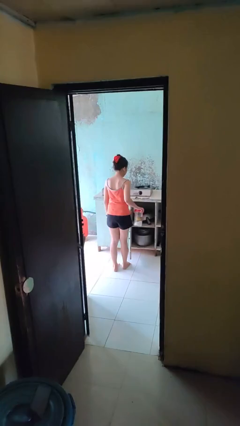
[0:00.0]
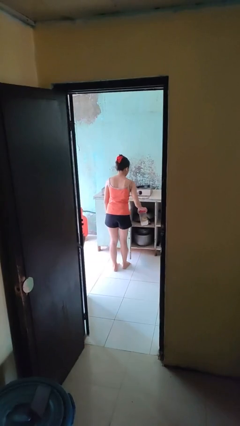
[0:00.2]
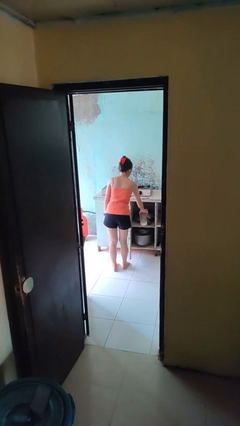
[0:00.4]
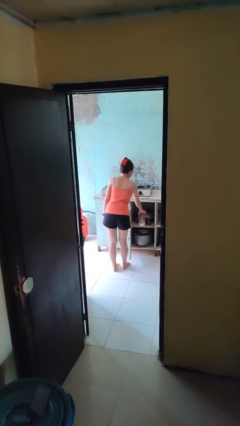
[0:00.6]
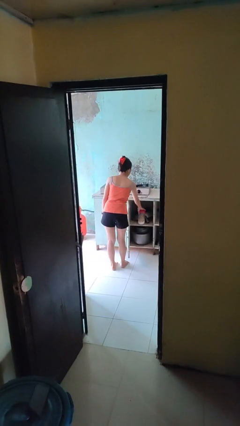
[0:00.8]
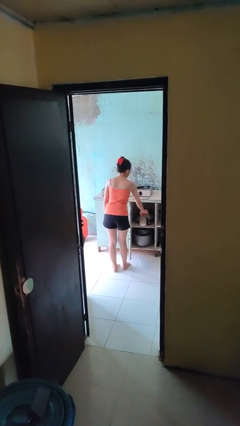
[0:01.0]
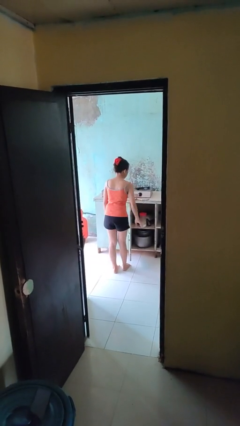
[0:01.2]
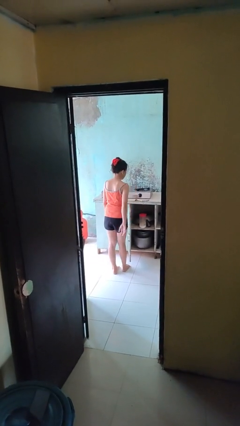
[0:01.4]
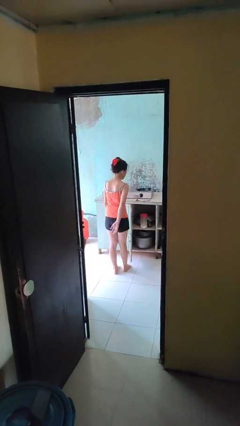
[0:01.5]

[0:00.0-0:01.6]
person puts down object into cabinet

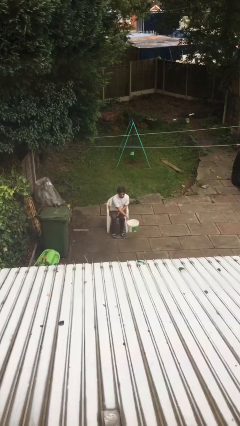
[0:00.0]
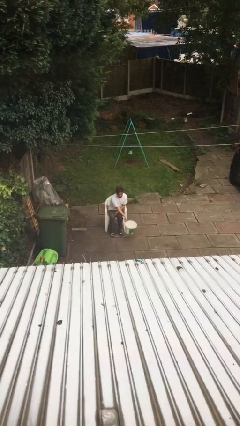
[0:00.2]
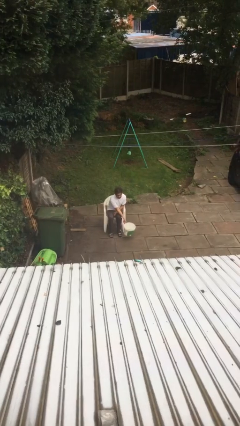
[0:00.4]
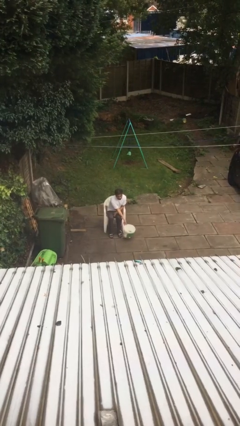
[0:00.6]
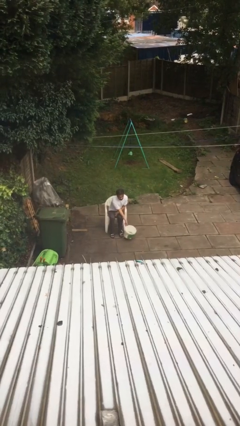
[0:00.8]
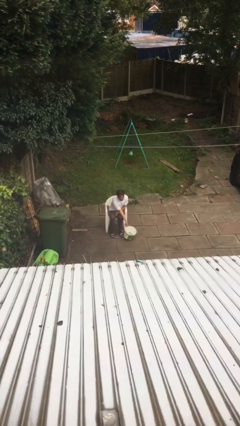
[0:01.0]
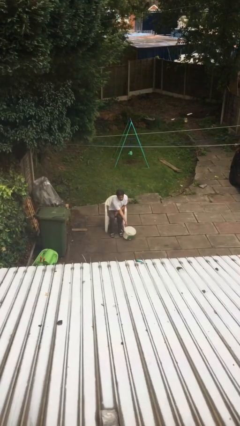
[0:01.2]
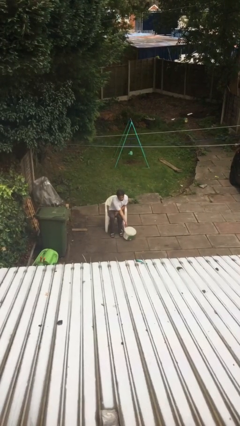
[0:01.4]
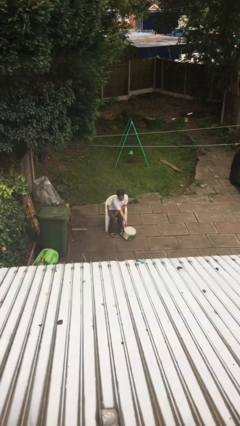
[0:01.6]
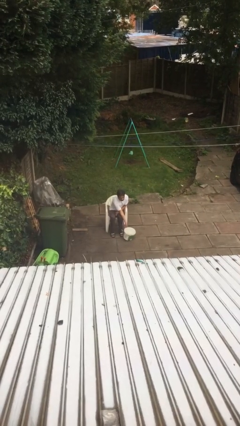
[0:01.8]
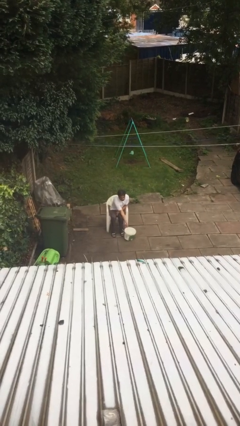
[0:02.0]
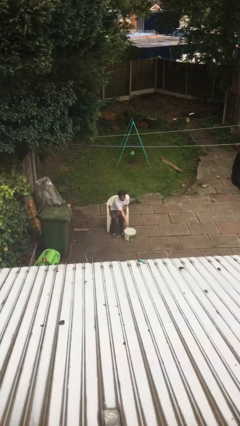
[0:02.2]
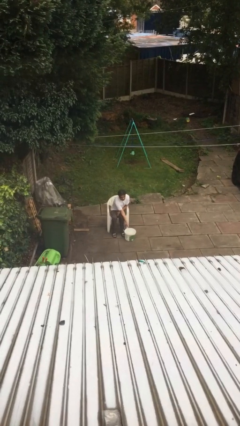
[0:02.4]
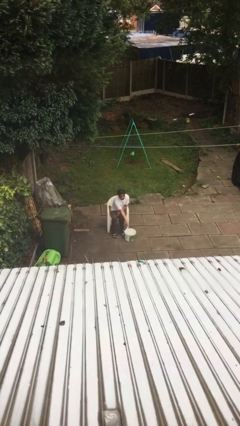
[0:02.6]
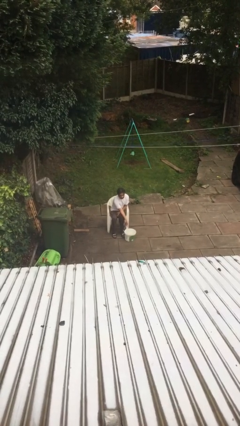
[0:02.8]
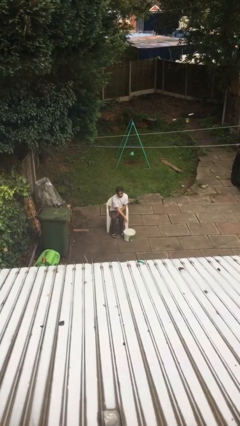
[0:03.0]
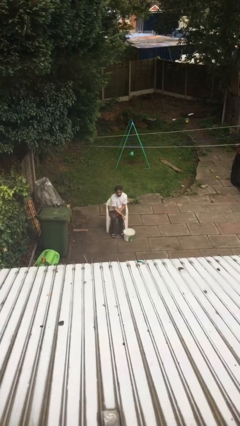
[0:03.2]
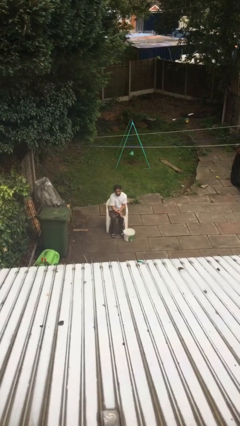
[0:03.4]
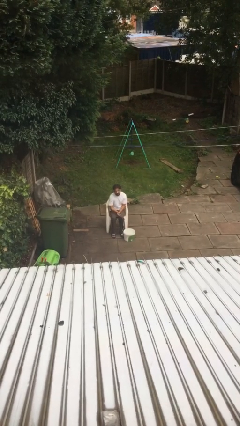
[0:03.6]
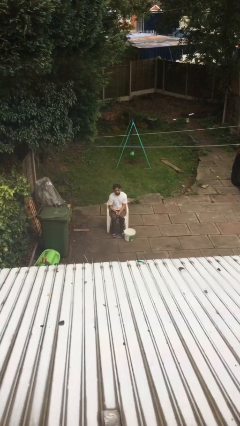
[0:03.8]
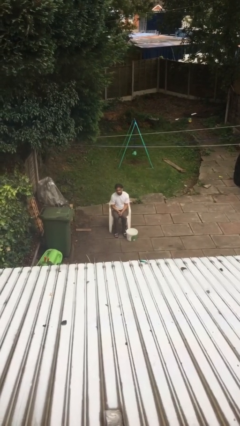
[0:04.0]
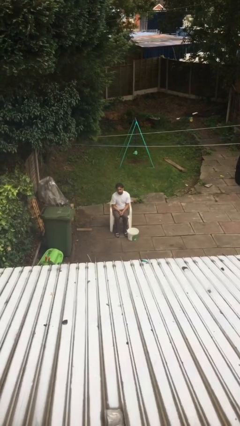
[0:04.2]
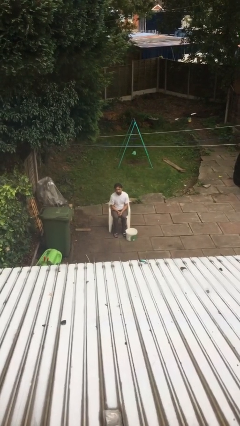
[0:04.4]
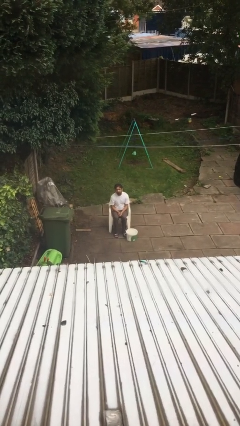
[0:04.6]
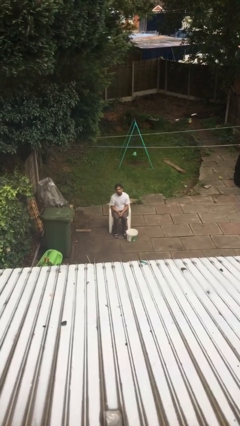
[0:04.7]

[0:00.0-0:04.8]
person puts down object on floor

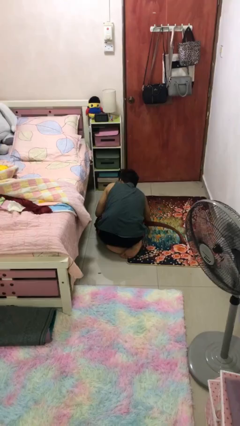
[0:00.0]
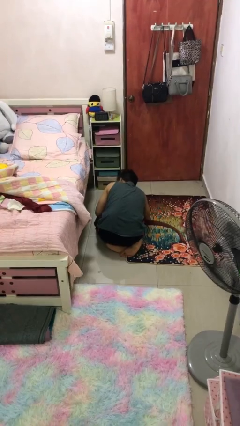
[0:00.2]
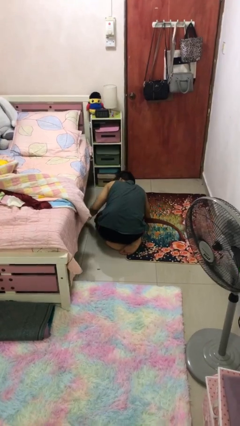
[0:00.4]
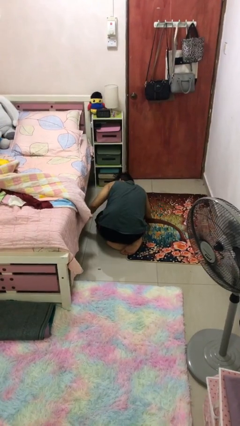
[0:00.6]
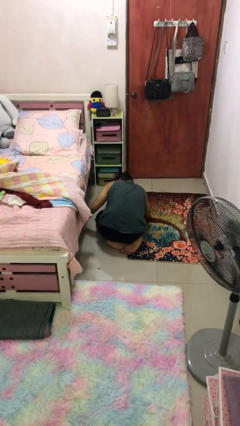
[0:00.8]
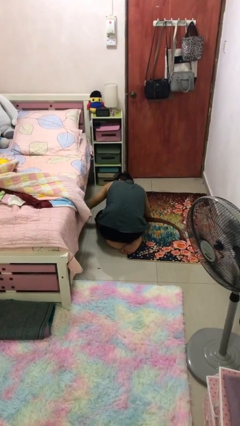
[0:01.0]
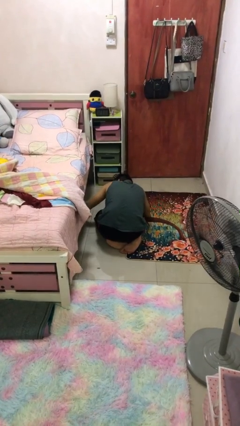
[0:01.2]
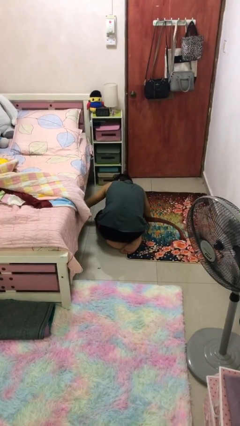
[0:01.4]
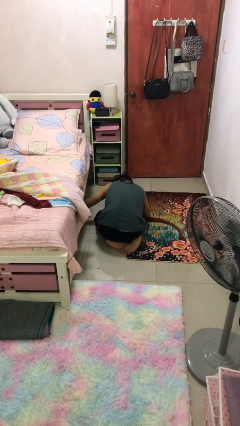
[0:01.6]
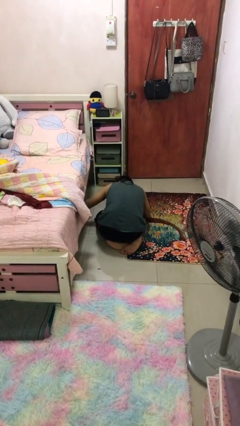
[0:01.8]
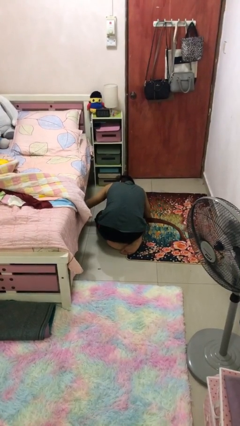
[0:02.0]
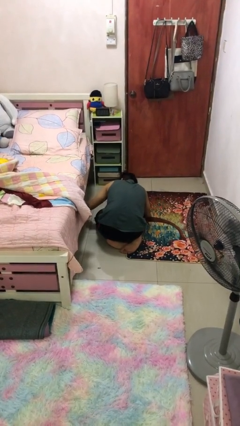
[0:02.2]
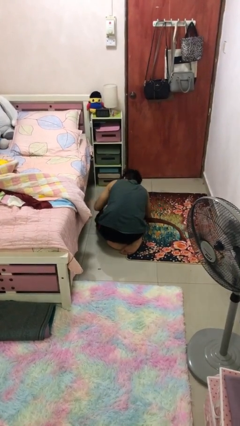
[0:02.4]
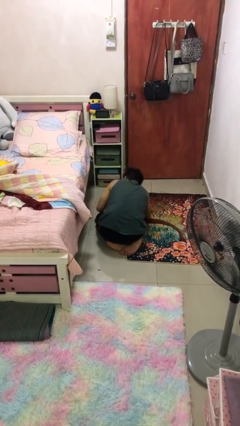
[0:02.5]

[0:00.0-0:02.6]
person searches under bed

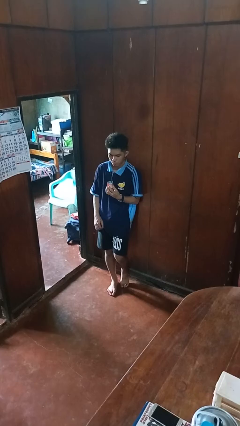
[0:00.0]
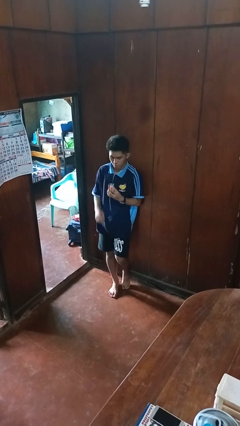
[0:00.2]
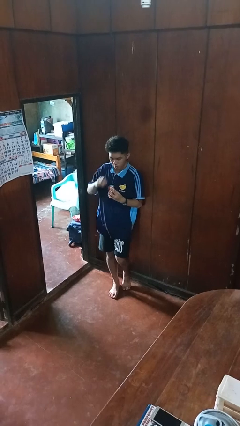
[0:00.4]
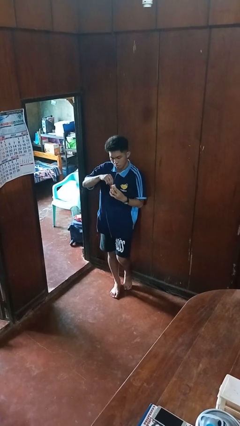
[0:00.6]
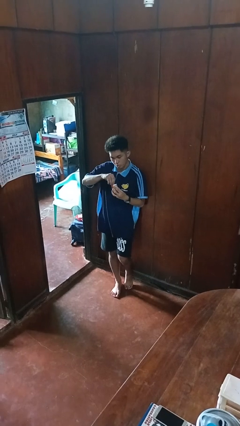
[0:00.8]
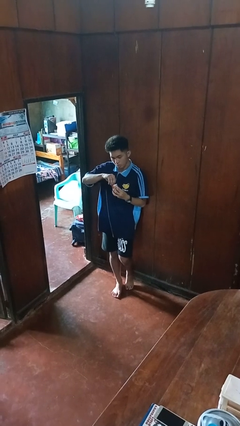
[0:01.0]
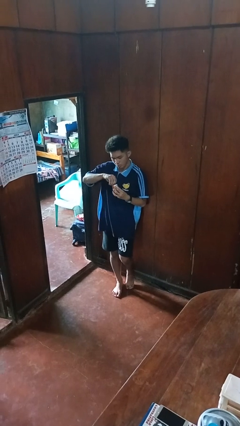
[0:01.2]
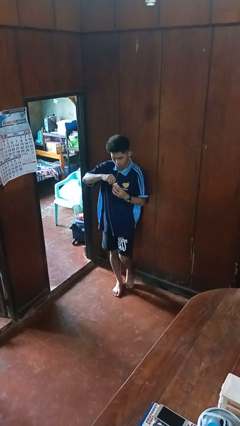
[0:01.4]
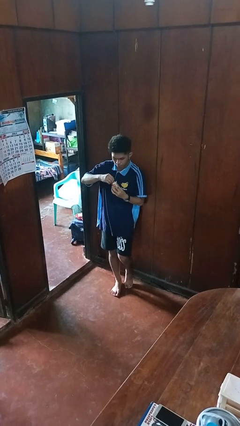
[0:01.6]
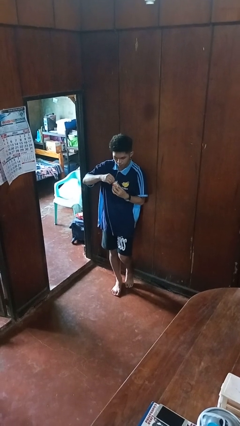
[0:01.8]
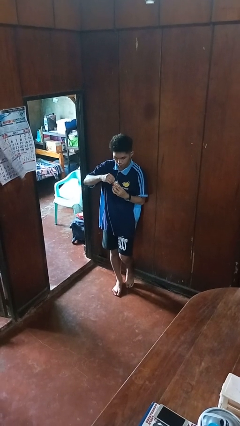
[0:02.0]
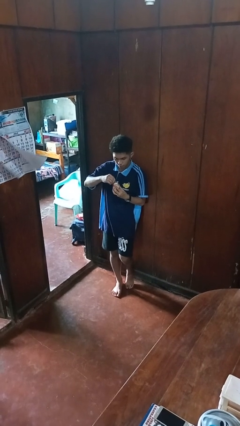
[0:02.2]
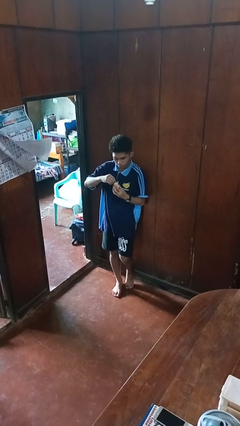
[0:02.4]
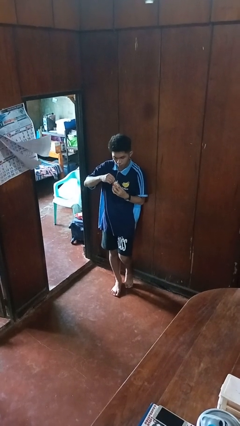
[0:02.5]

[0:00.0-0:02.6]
person opens beverage can

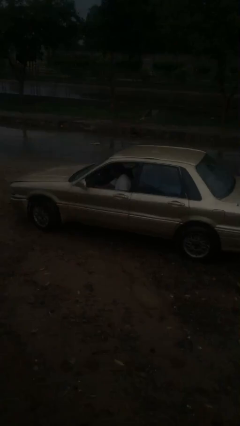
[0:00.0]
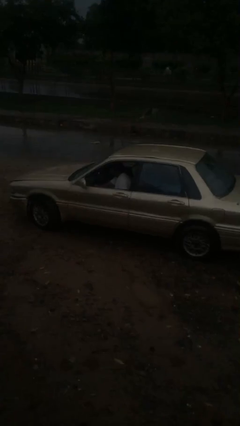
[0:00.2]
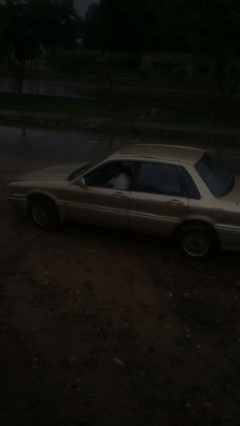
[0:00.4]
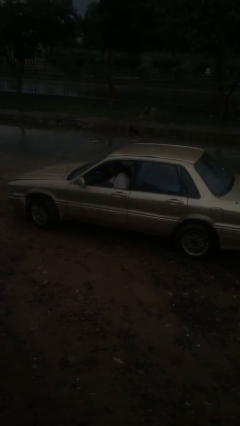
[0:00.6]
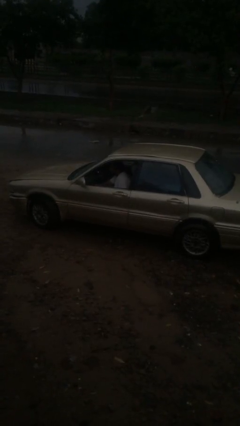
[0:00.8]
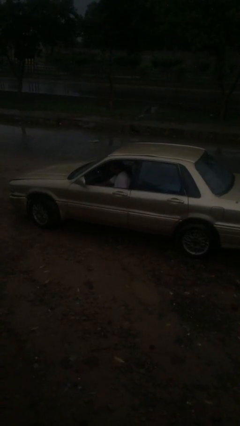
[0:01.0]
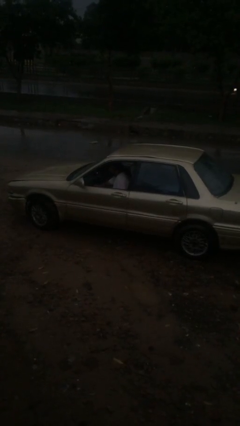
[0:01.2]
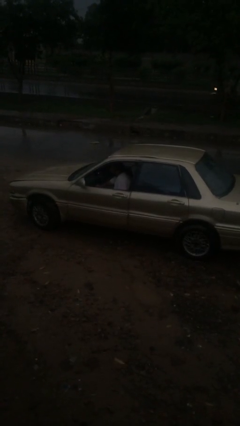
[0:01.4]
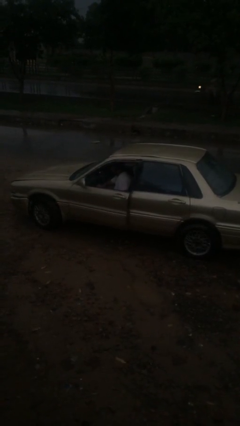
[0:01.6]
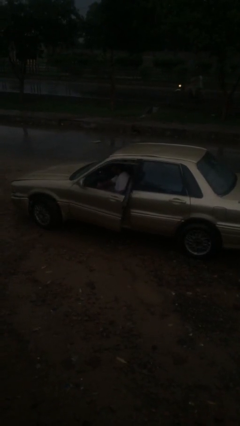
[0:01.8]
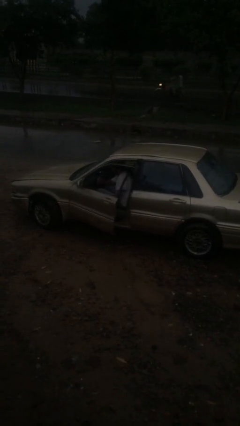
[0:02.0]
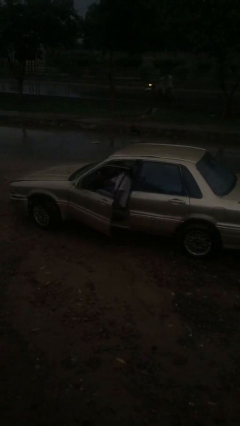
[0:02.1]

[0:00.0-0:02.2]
person opens car door

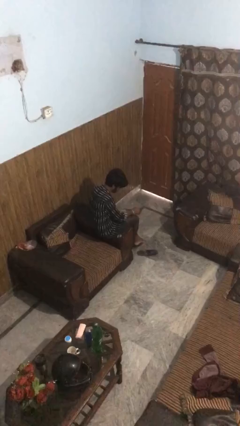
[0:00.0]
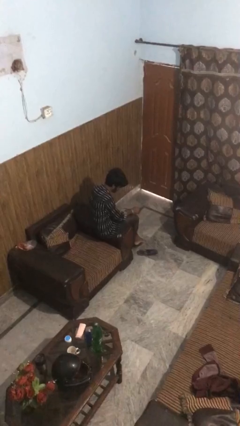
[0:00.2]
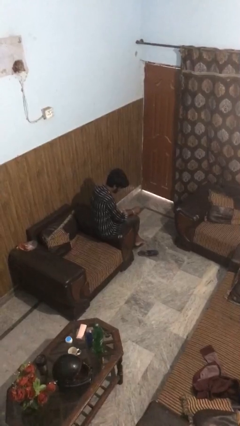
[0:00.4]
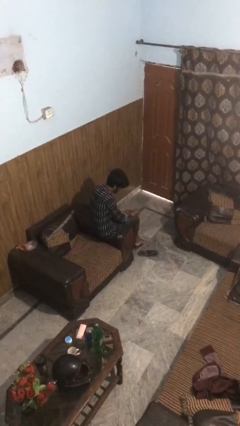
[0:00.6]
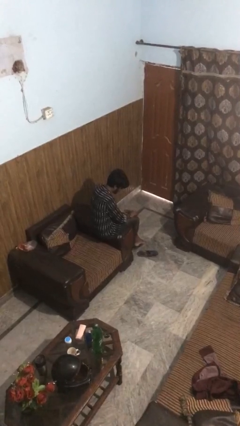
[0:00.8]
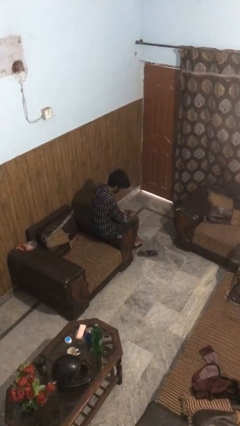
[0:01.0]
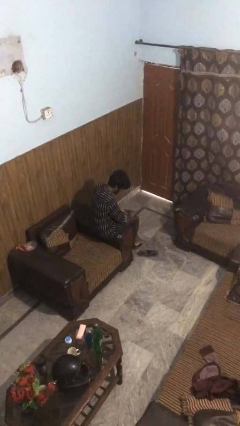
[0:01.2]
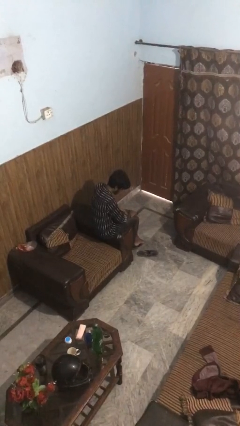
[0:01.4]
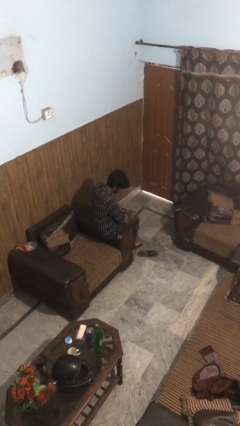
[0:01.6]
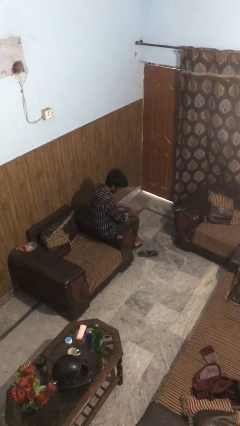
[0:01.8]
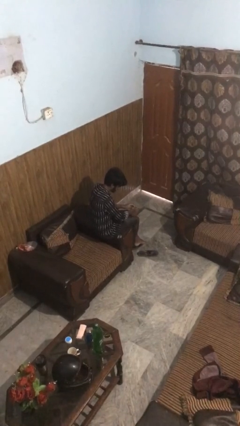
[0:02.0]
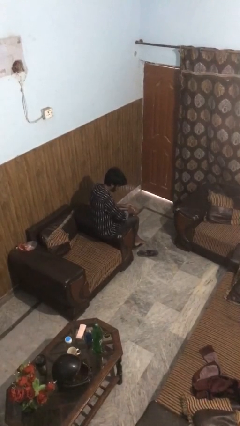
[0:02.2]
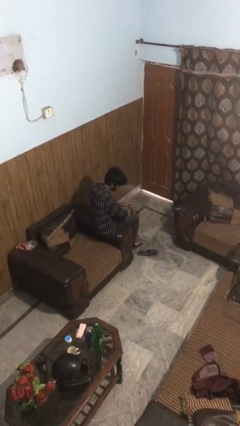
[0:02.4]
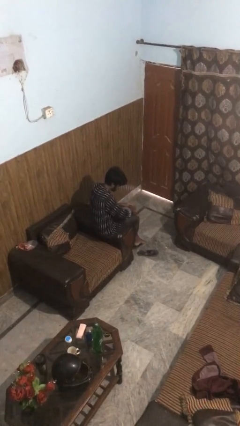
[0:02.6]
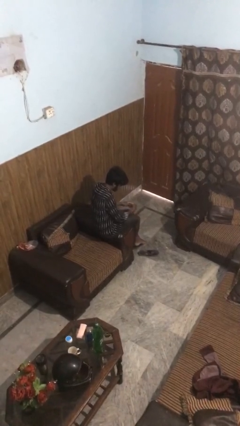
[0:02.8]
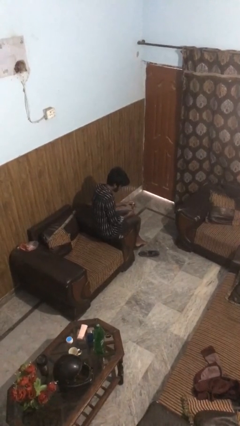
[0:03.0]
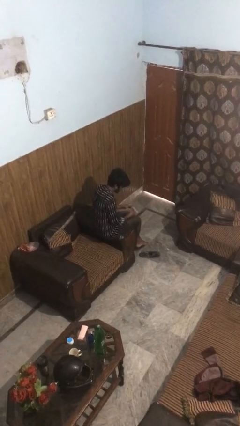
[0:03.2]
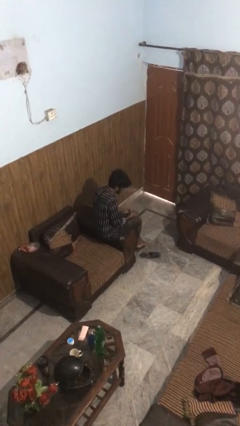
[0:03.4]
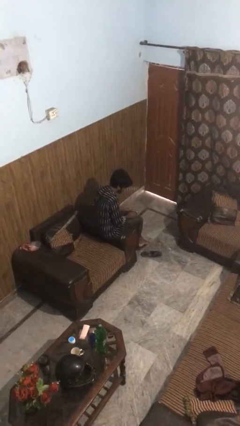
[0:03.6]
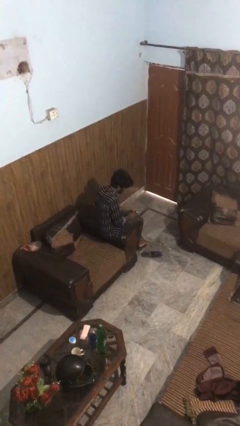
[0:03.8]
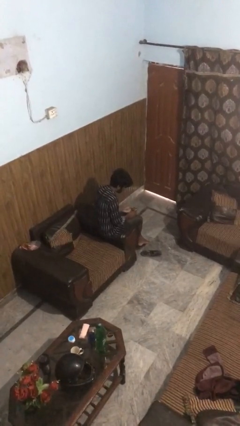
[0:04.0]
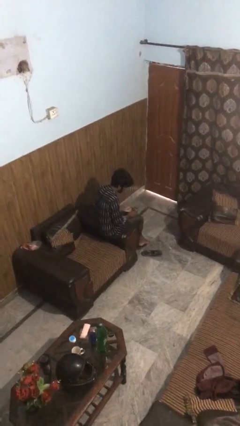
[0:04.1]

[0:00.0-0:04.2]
person takes off wristwatch
